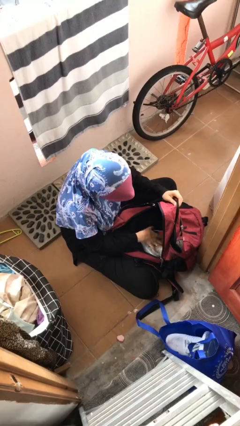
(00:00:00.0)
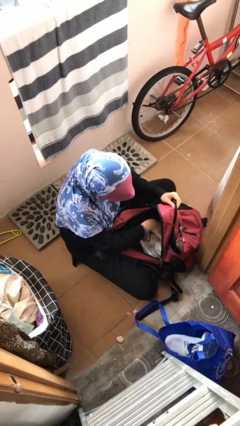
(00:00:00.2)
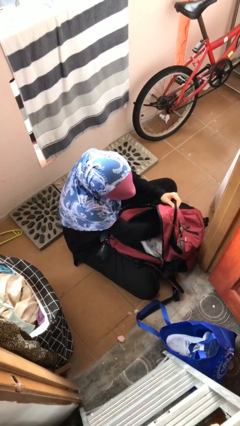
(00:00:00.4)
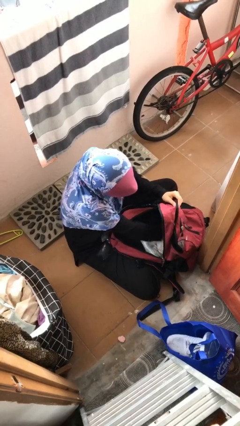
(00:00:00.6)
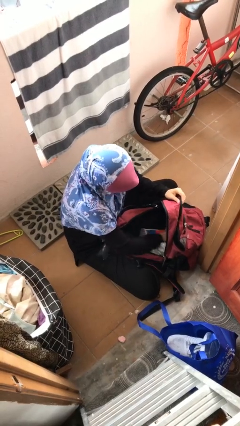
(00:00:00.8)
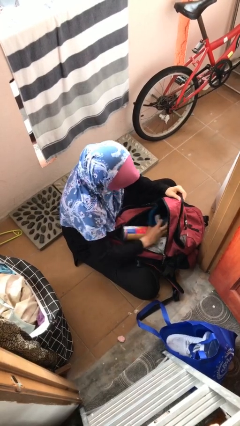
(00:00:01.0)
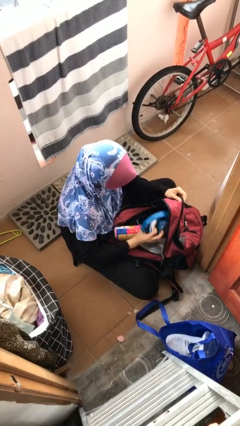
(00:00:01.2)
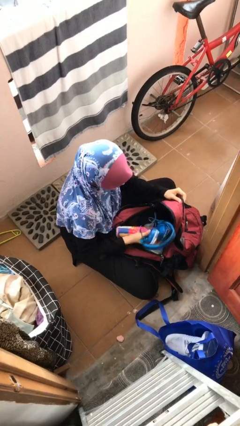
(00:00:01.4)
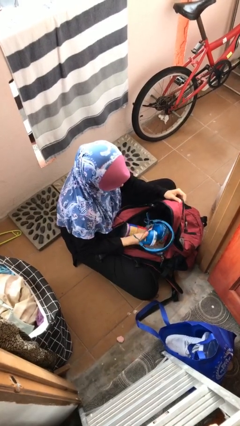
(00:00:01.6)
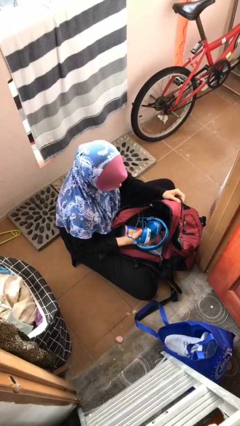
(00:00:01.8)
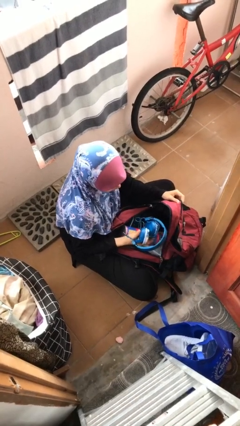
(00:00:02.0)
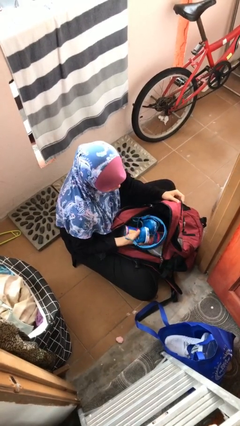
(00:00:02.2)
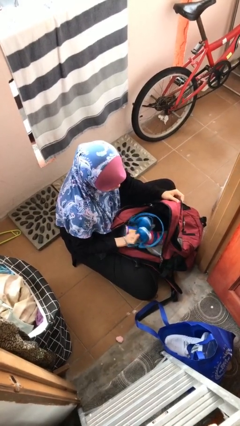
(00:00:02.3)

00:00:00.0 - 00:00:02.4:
person takes object from backpack

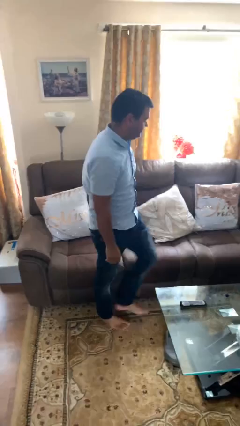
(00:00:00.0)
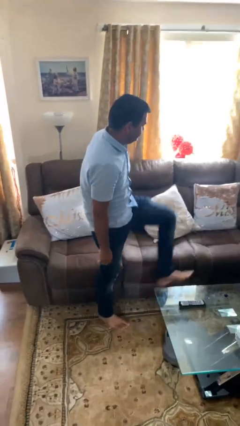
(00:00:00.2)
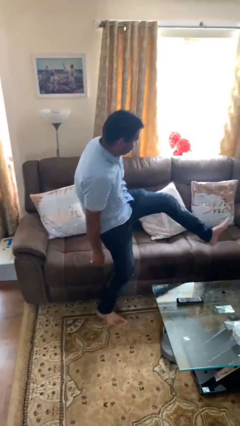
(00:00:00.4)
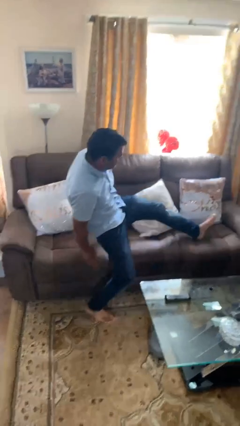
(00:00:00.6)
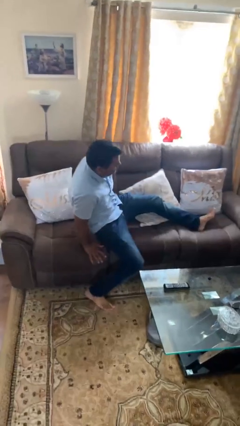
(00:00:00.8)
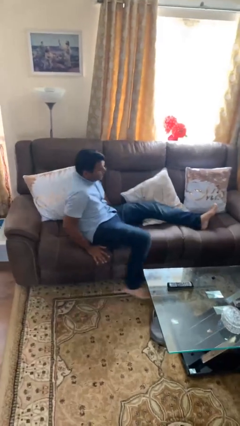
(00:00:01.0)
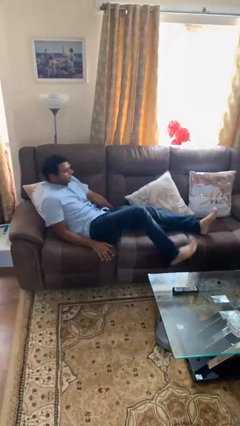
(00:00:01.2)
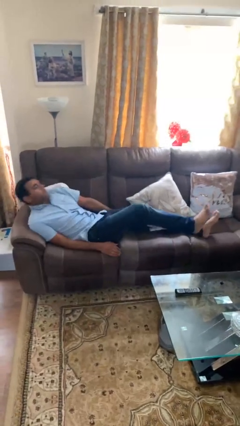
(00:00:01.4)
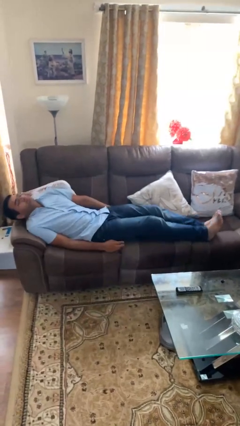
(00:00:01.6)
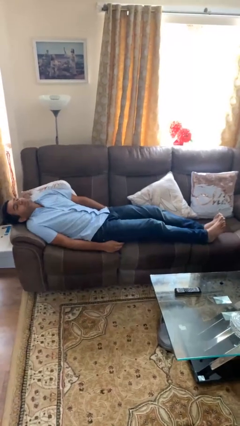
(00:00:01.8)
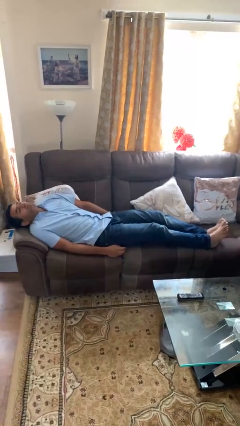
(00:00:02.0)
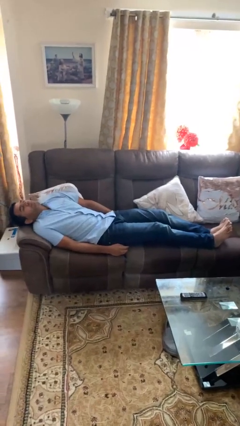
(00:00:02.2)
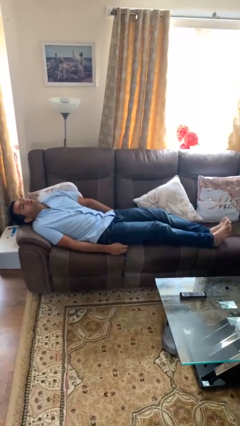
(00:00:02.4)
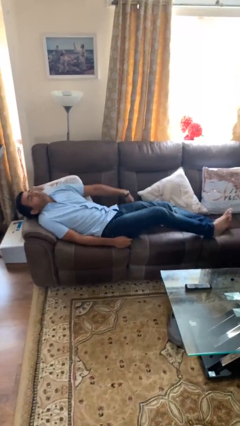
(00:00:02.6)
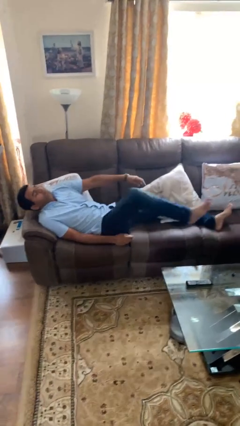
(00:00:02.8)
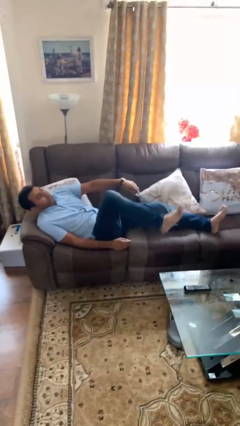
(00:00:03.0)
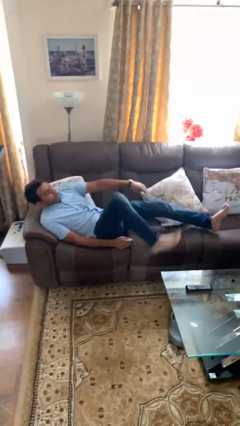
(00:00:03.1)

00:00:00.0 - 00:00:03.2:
person lies down on couch

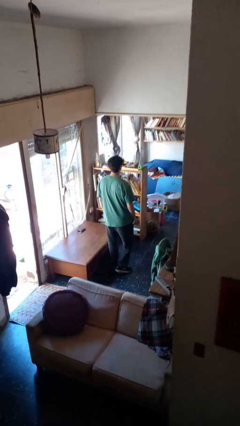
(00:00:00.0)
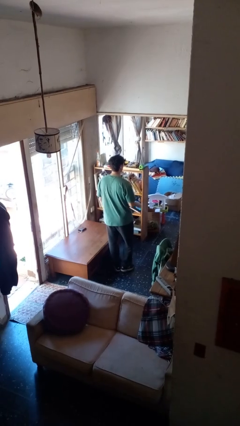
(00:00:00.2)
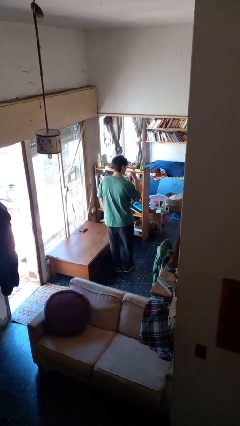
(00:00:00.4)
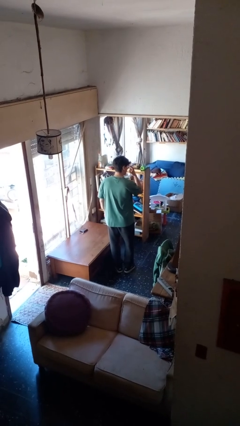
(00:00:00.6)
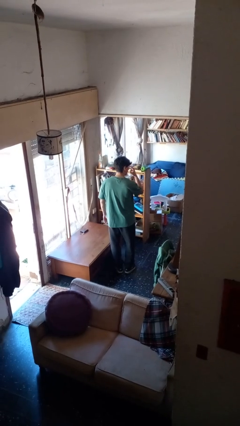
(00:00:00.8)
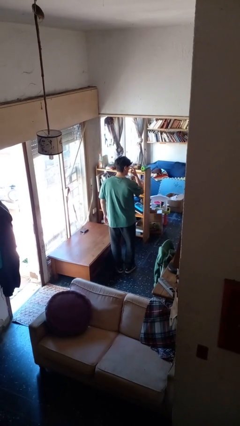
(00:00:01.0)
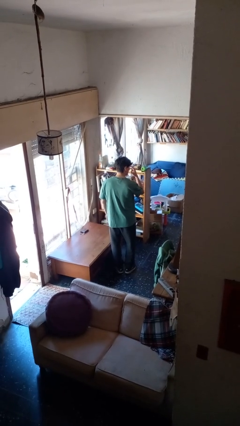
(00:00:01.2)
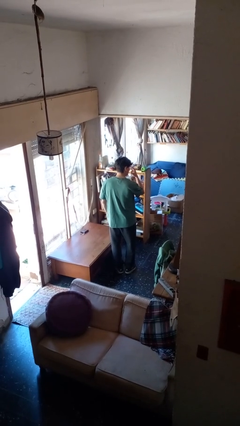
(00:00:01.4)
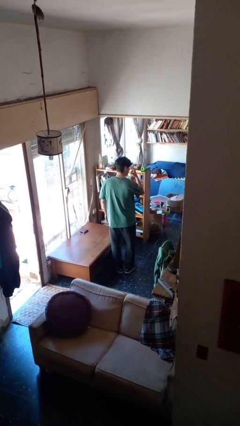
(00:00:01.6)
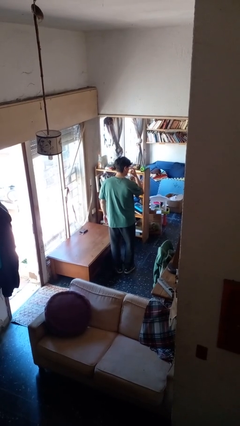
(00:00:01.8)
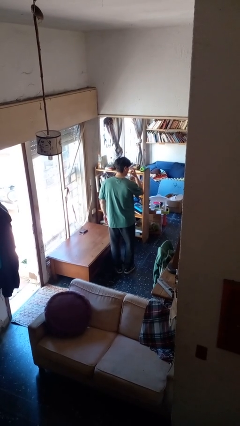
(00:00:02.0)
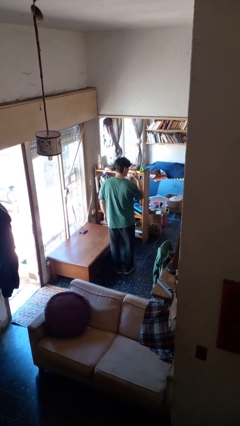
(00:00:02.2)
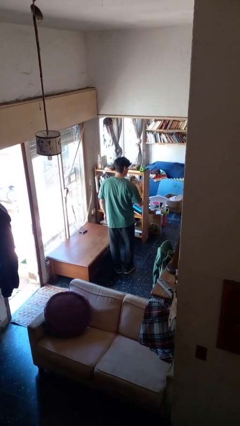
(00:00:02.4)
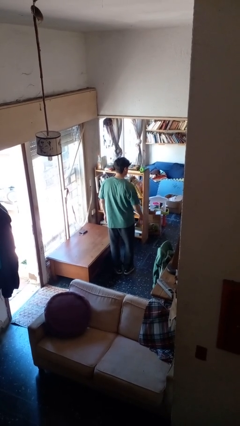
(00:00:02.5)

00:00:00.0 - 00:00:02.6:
person gestures watch closely

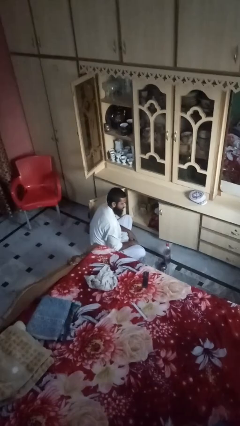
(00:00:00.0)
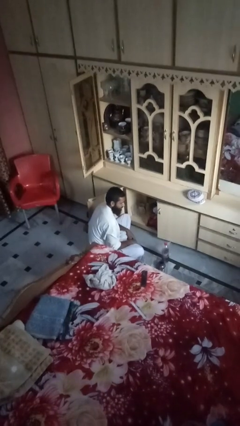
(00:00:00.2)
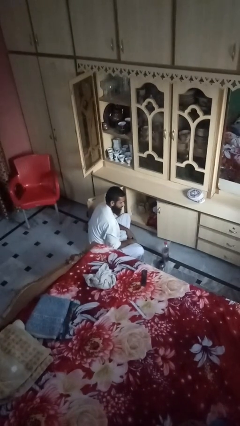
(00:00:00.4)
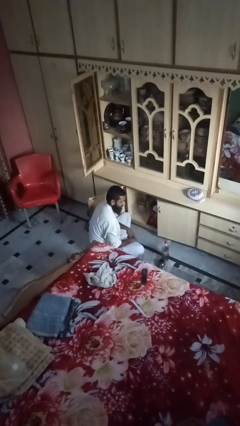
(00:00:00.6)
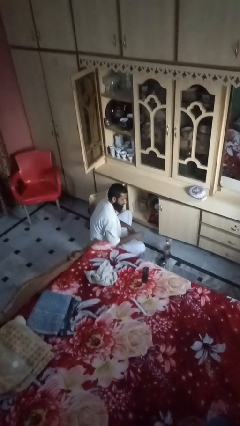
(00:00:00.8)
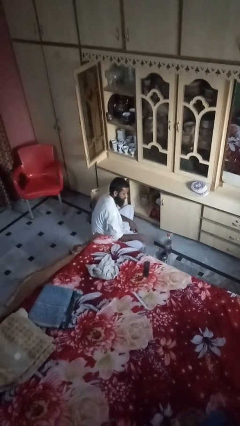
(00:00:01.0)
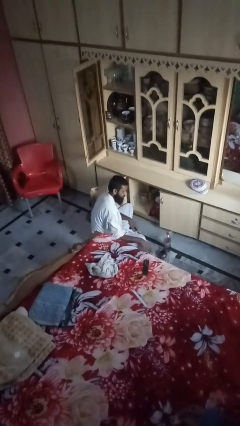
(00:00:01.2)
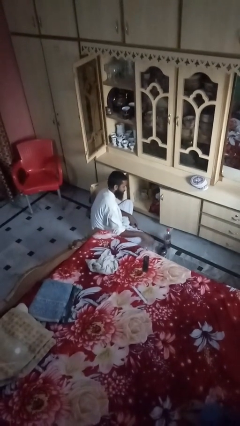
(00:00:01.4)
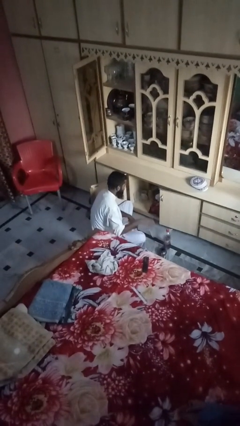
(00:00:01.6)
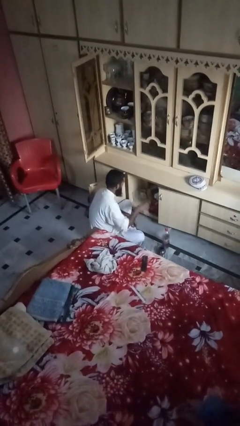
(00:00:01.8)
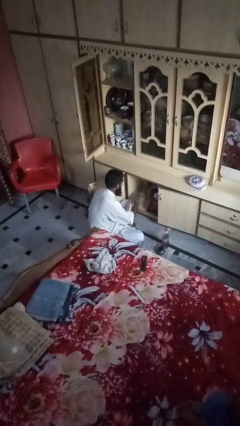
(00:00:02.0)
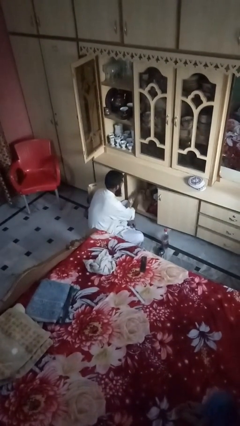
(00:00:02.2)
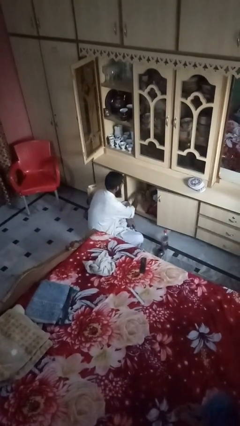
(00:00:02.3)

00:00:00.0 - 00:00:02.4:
person loads groceries into cabinet

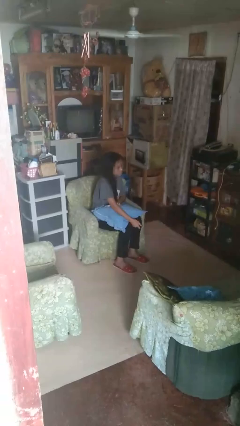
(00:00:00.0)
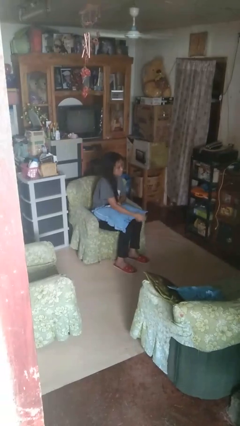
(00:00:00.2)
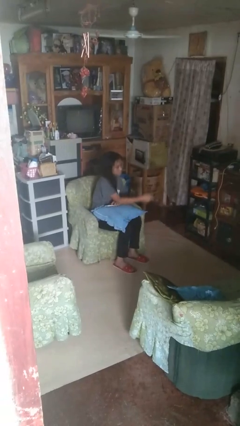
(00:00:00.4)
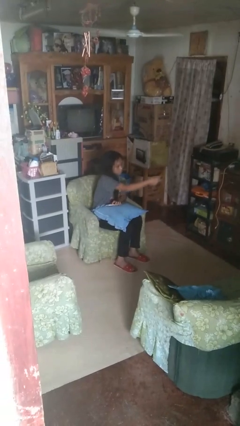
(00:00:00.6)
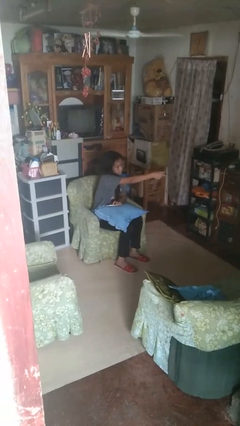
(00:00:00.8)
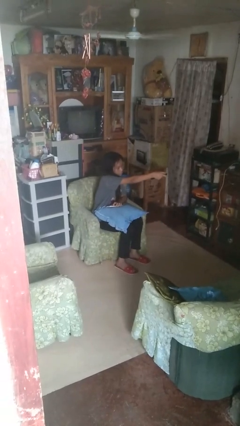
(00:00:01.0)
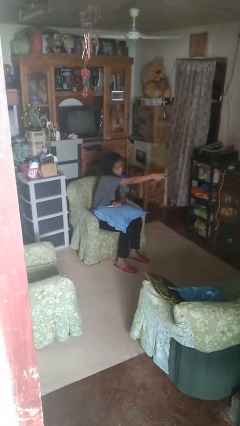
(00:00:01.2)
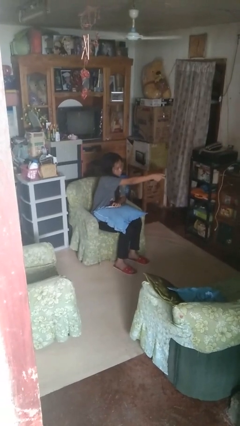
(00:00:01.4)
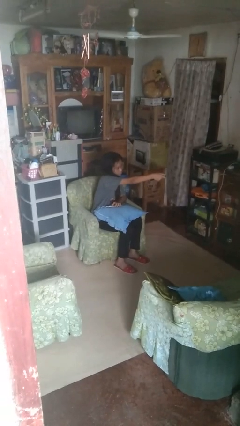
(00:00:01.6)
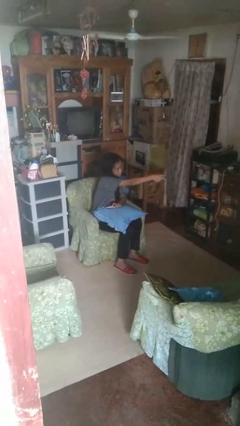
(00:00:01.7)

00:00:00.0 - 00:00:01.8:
person uses television remote

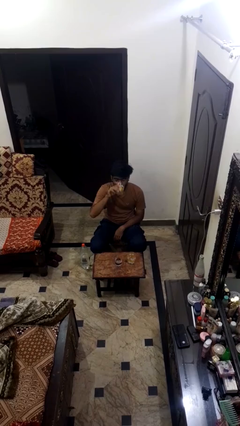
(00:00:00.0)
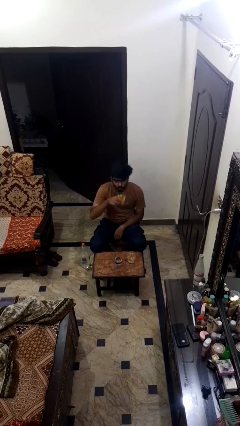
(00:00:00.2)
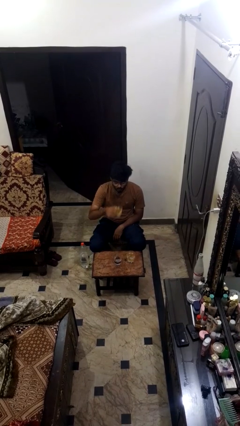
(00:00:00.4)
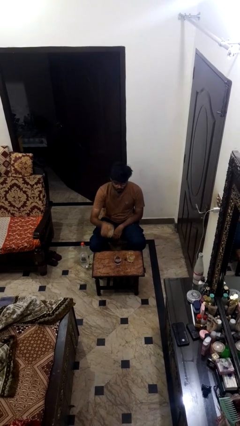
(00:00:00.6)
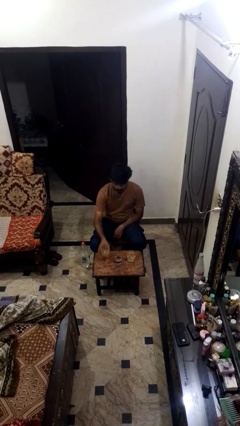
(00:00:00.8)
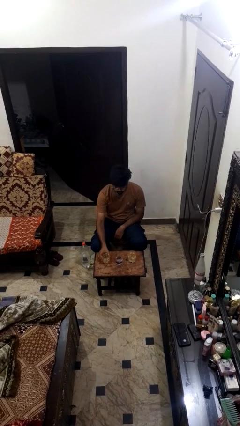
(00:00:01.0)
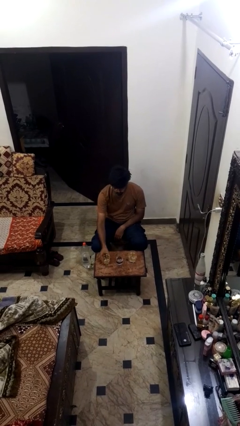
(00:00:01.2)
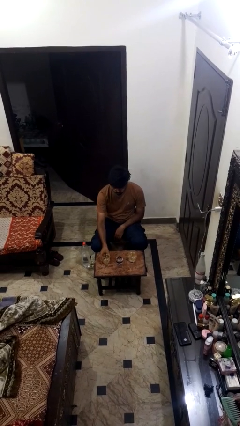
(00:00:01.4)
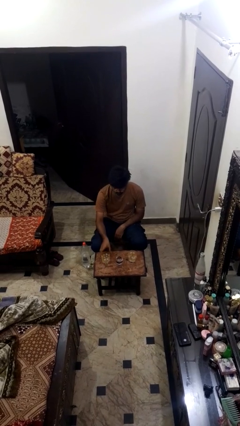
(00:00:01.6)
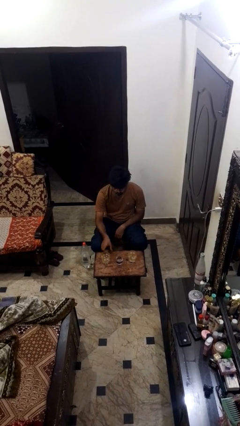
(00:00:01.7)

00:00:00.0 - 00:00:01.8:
person puts down object on table

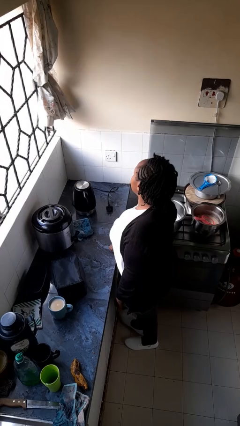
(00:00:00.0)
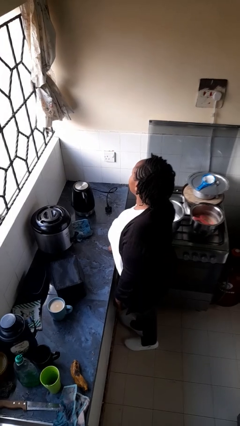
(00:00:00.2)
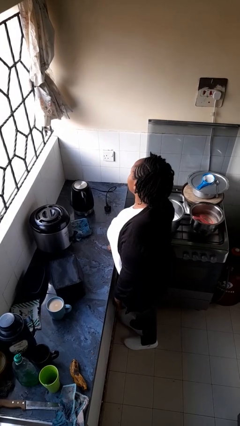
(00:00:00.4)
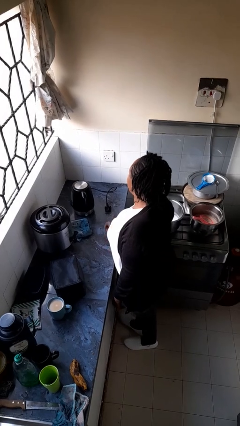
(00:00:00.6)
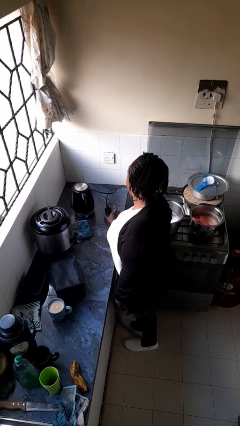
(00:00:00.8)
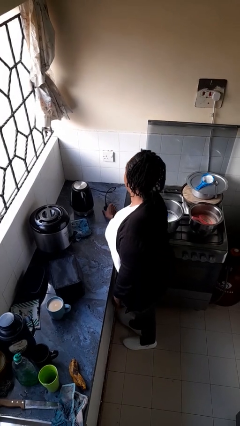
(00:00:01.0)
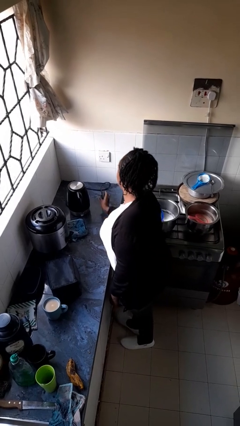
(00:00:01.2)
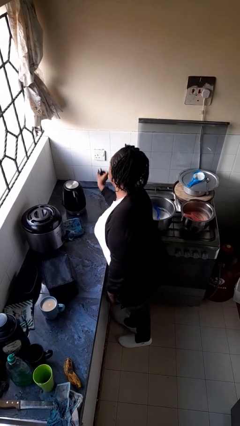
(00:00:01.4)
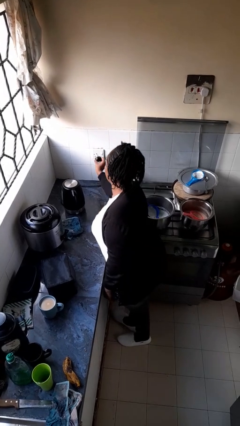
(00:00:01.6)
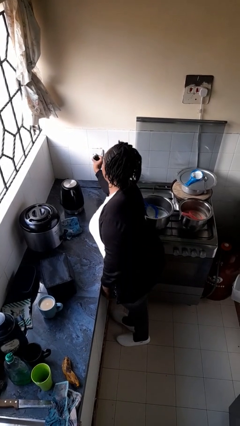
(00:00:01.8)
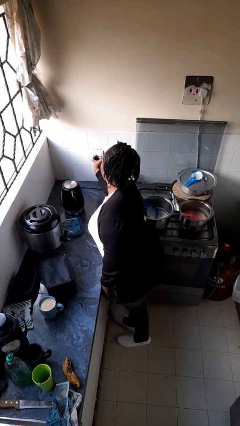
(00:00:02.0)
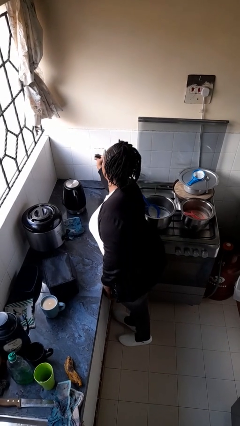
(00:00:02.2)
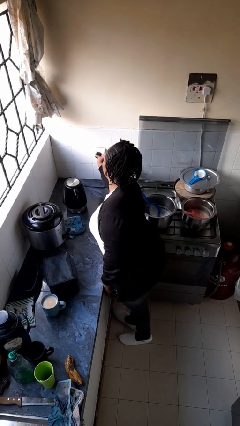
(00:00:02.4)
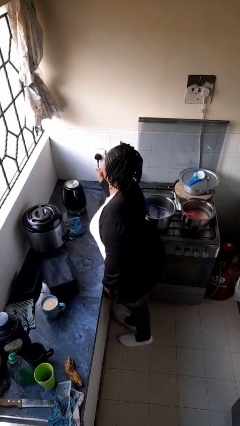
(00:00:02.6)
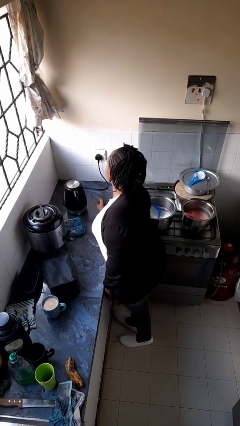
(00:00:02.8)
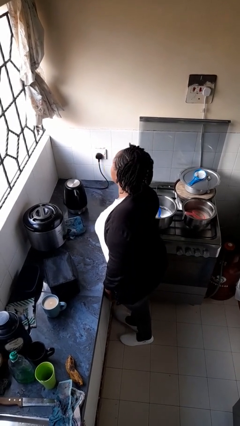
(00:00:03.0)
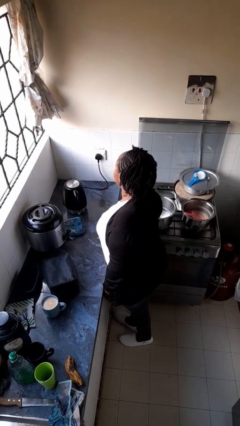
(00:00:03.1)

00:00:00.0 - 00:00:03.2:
person plugs into electrical socket
